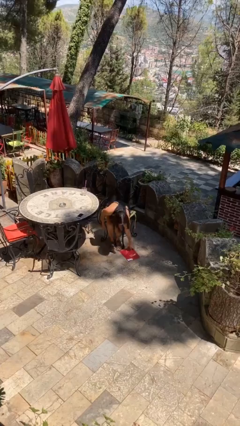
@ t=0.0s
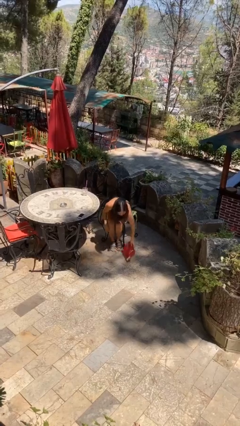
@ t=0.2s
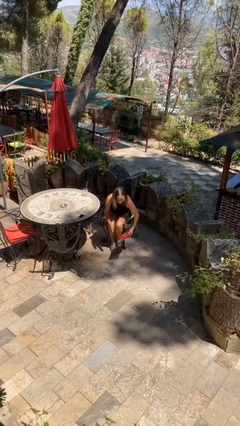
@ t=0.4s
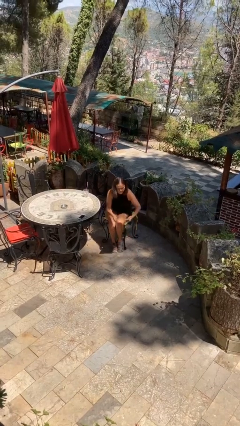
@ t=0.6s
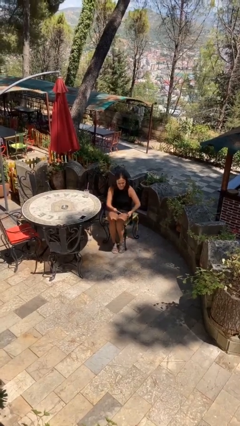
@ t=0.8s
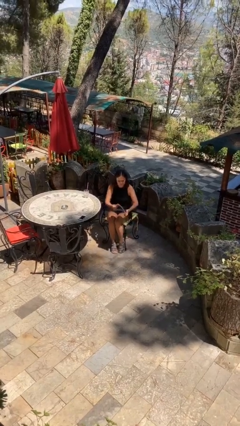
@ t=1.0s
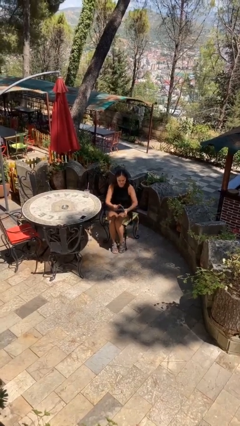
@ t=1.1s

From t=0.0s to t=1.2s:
person picks up object from floor

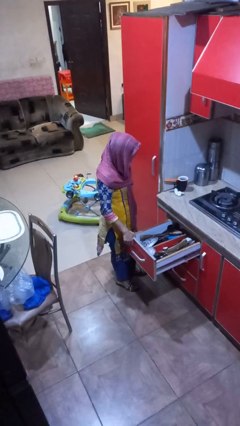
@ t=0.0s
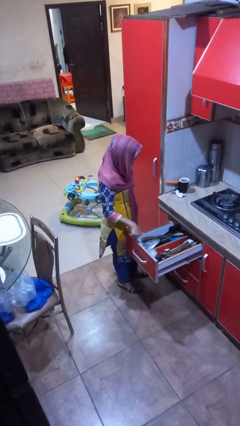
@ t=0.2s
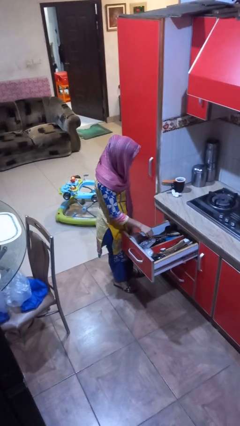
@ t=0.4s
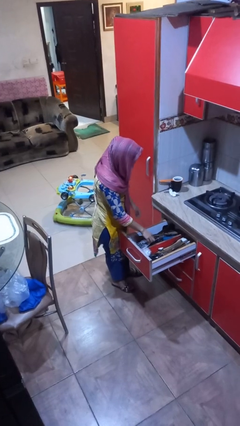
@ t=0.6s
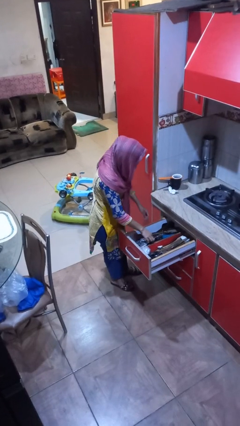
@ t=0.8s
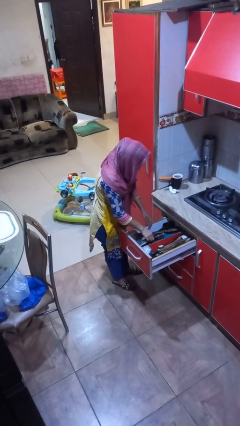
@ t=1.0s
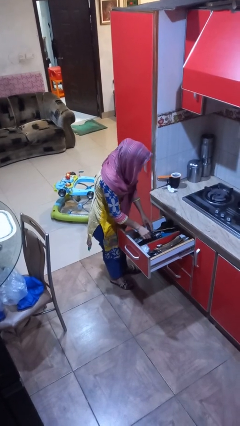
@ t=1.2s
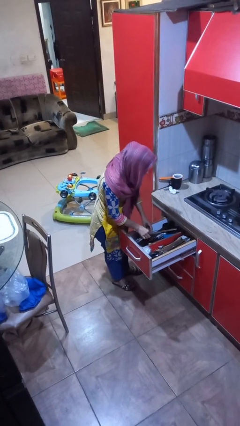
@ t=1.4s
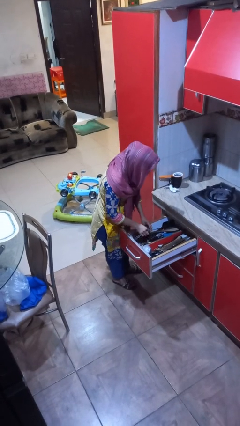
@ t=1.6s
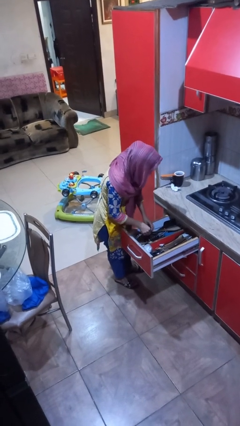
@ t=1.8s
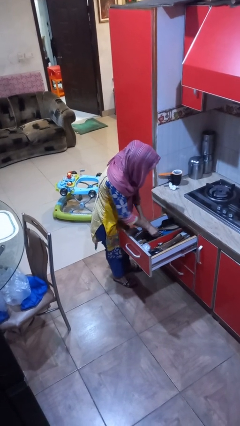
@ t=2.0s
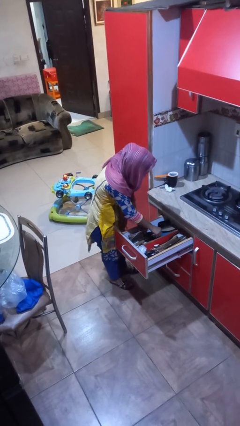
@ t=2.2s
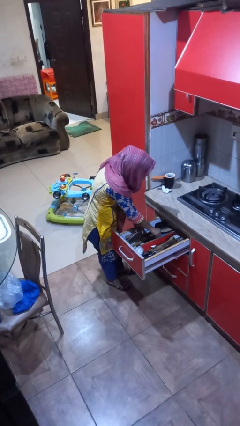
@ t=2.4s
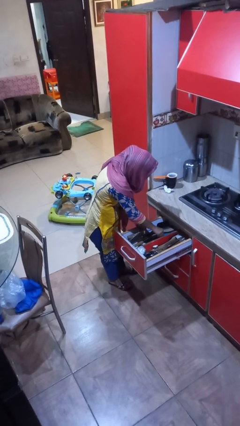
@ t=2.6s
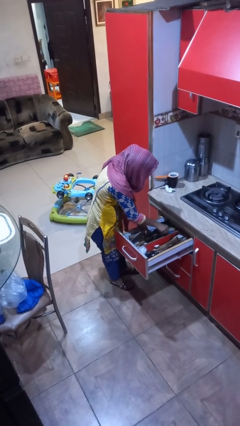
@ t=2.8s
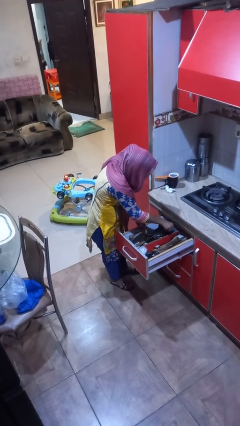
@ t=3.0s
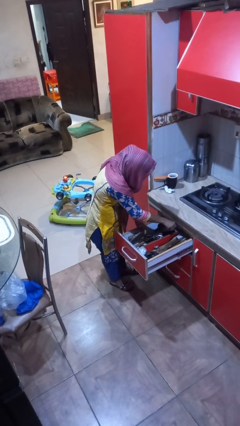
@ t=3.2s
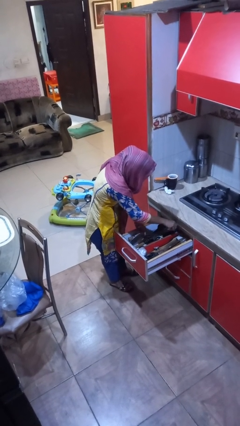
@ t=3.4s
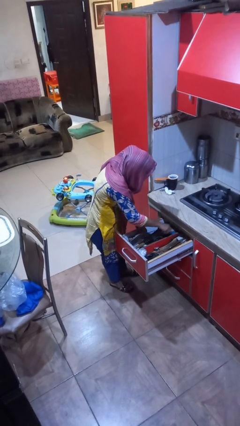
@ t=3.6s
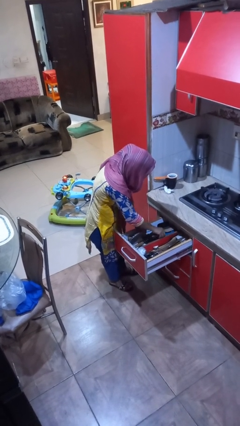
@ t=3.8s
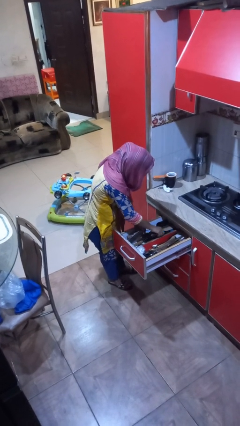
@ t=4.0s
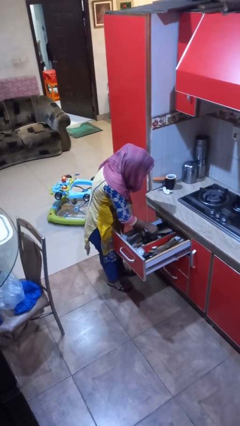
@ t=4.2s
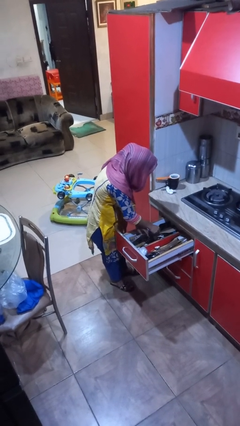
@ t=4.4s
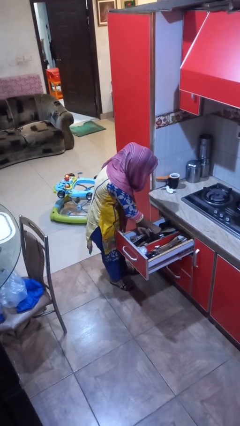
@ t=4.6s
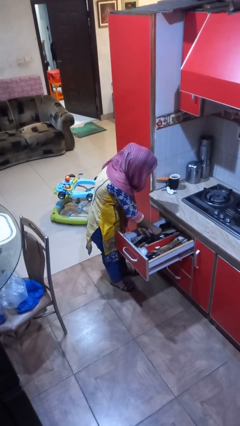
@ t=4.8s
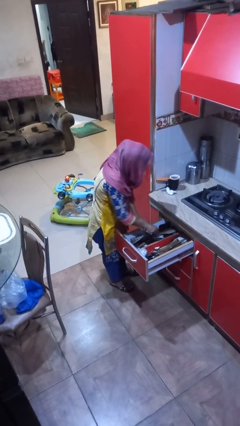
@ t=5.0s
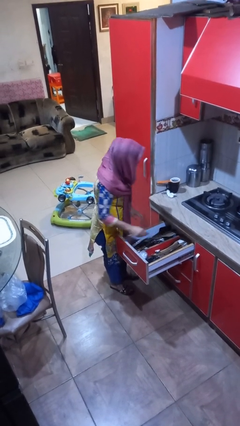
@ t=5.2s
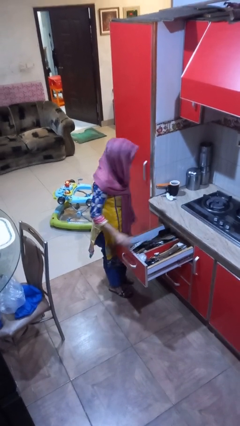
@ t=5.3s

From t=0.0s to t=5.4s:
person searches in kitchen drawer

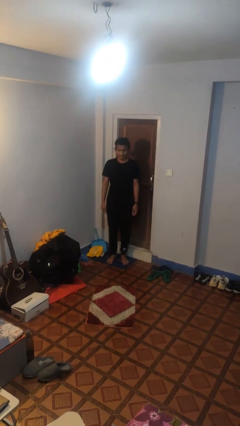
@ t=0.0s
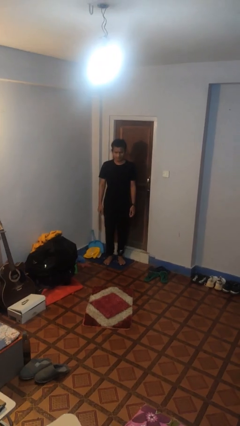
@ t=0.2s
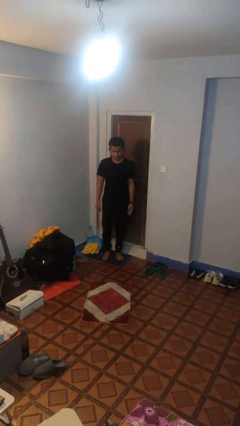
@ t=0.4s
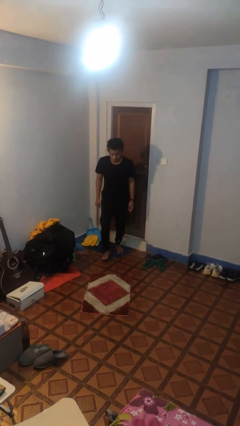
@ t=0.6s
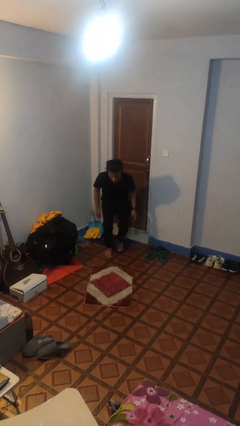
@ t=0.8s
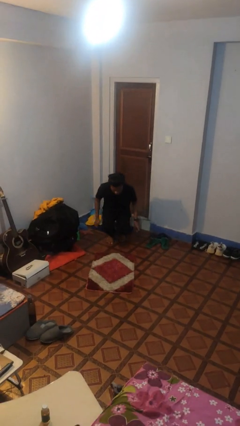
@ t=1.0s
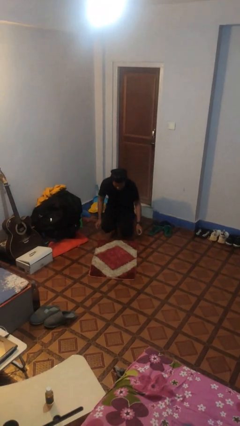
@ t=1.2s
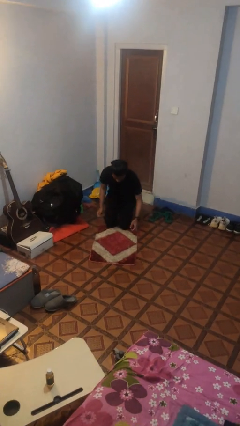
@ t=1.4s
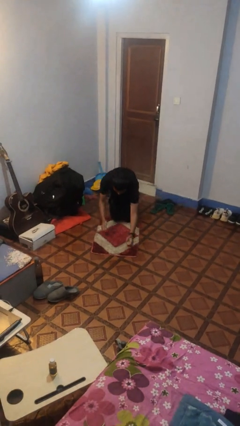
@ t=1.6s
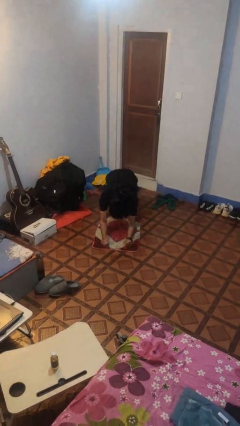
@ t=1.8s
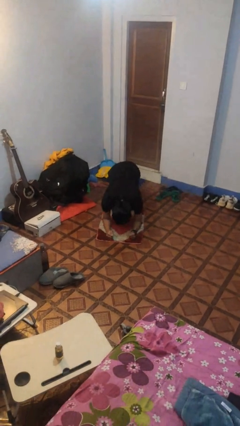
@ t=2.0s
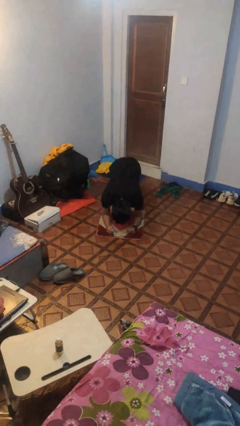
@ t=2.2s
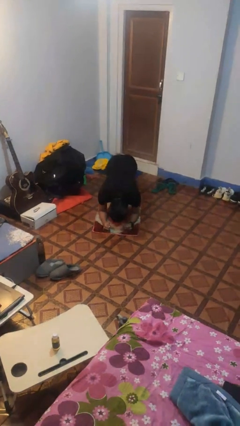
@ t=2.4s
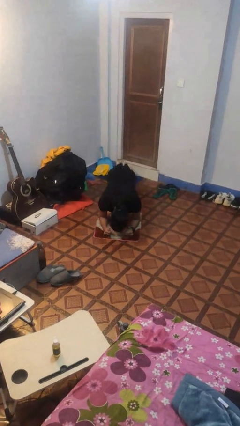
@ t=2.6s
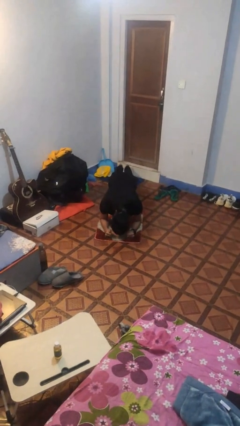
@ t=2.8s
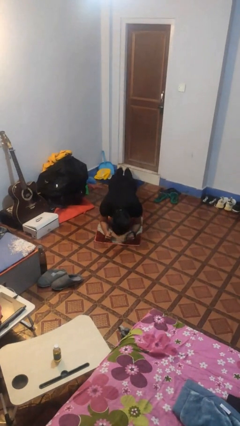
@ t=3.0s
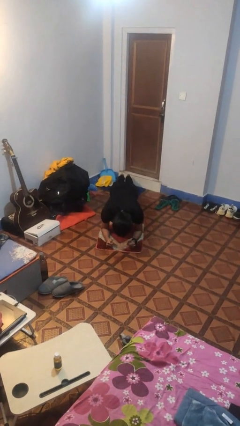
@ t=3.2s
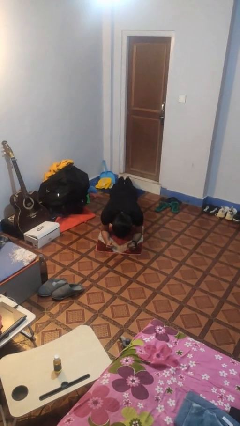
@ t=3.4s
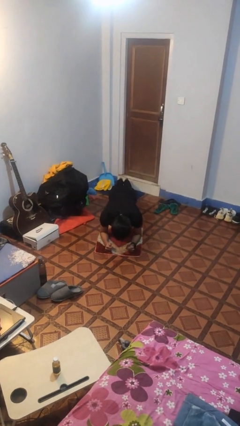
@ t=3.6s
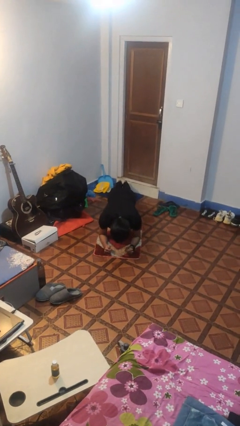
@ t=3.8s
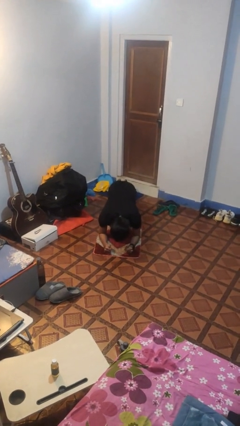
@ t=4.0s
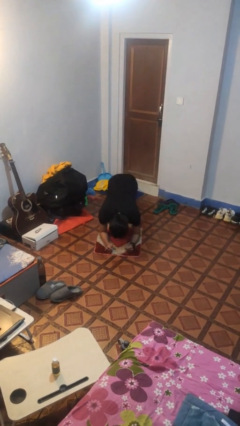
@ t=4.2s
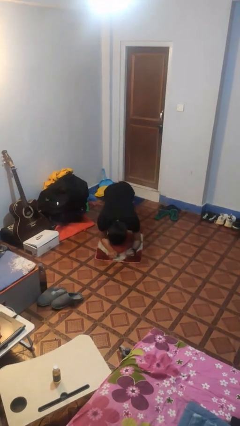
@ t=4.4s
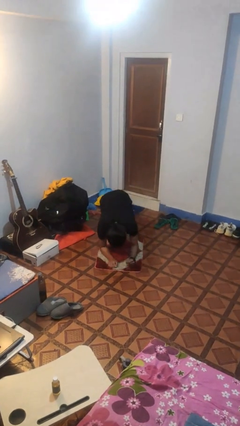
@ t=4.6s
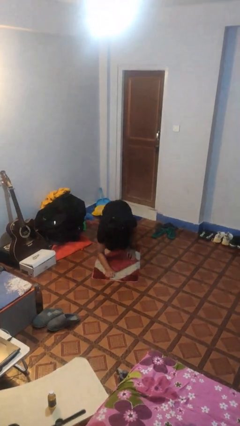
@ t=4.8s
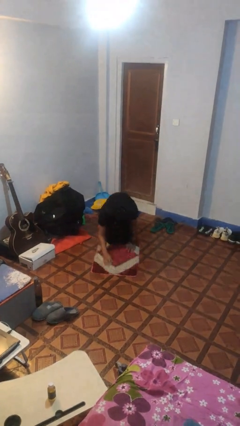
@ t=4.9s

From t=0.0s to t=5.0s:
person exercises with plank

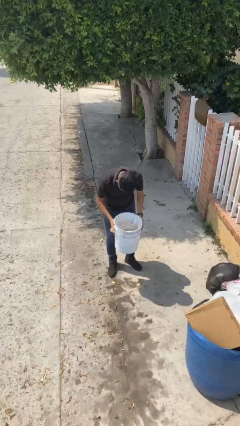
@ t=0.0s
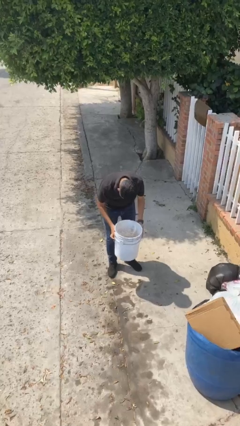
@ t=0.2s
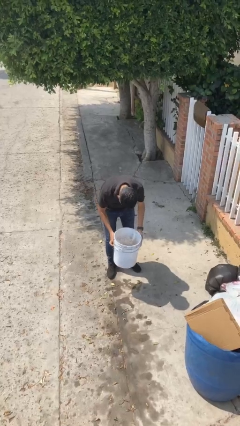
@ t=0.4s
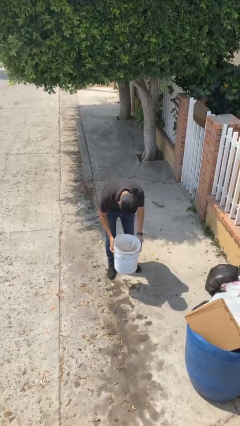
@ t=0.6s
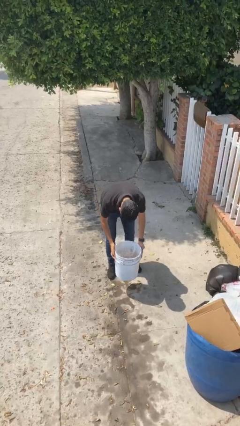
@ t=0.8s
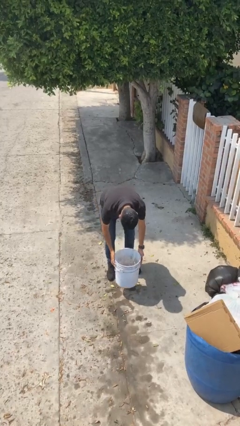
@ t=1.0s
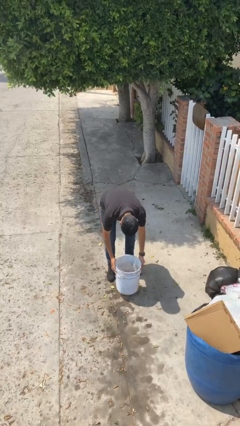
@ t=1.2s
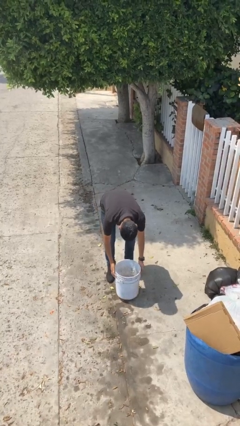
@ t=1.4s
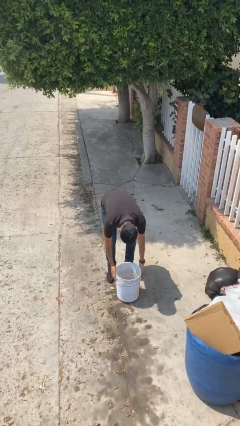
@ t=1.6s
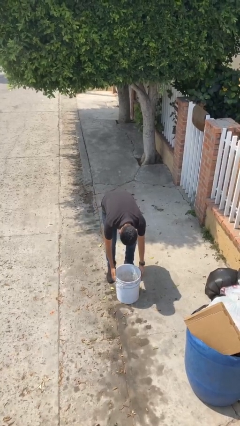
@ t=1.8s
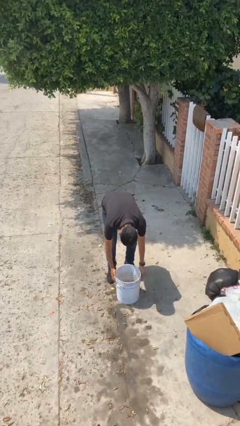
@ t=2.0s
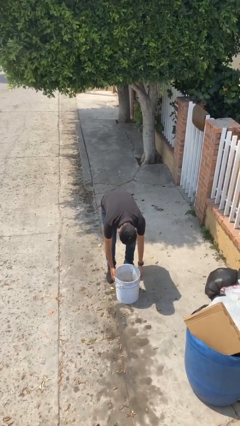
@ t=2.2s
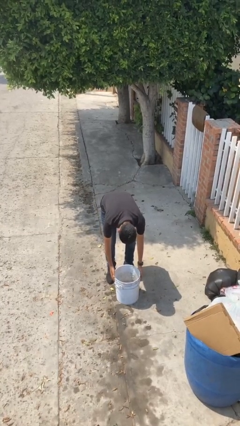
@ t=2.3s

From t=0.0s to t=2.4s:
person puts down object on floor

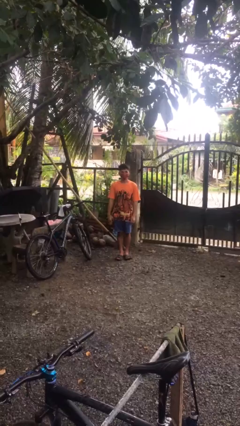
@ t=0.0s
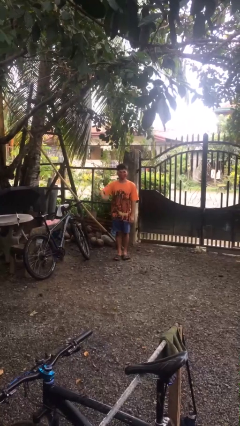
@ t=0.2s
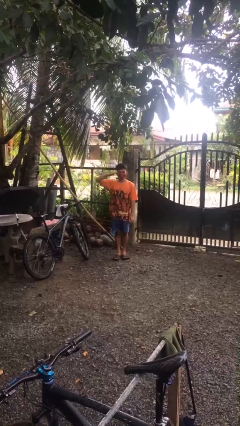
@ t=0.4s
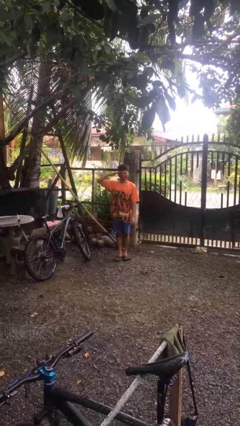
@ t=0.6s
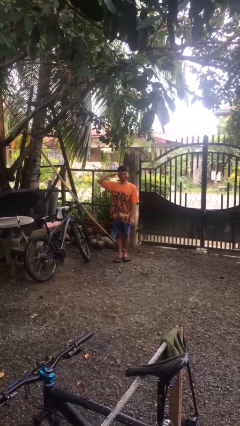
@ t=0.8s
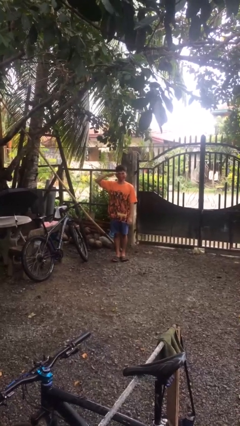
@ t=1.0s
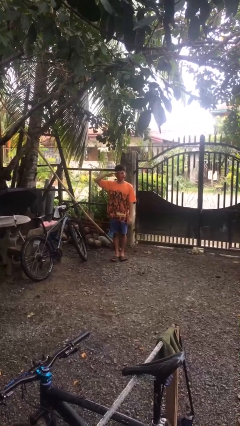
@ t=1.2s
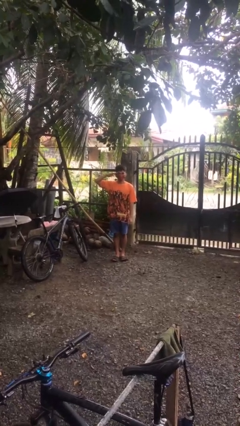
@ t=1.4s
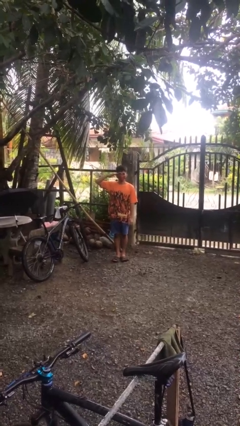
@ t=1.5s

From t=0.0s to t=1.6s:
person salutes

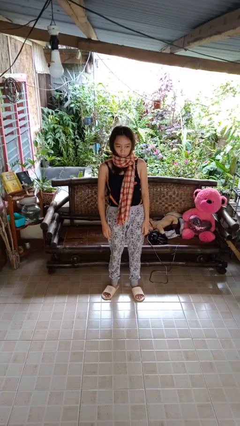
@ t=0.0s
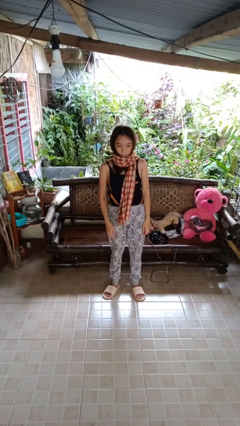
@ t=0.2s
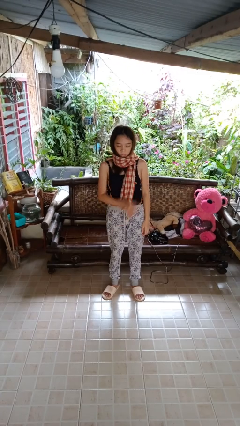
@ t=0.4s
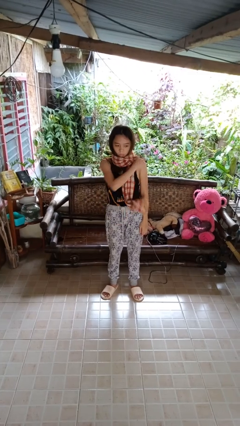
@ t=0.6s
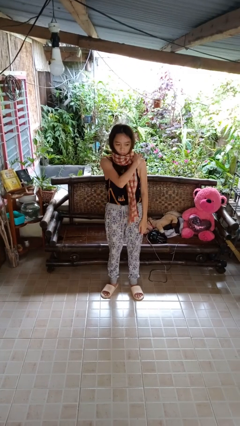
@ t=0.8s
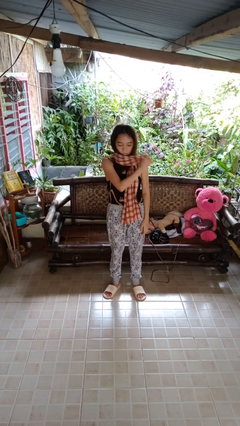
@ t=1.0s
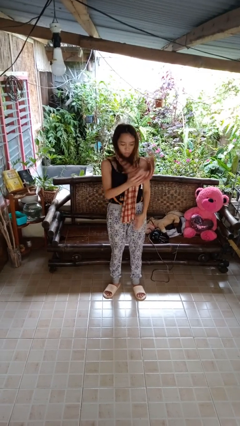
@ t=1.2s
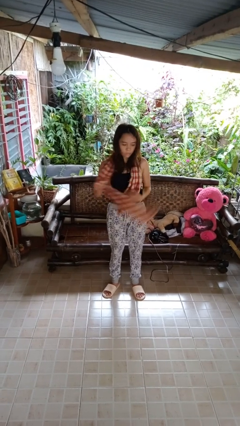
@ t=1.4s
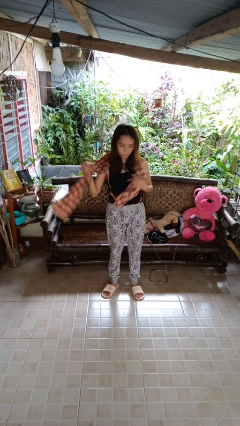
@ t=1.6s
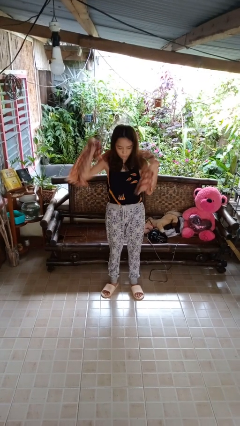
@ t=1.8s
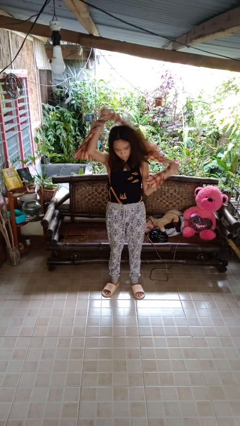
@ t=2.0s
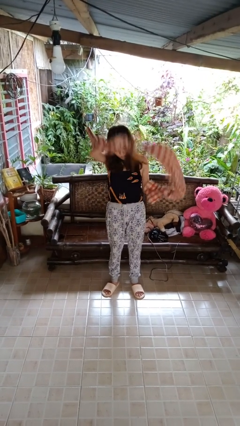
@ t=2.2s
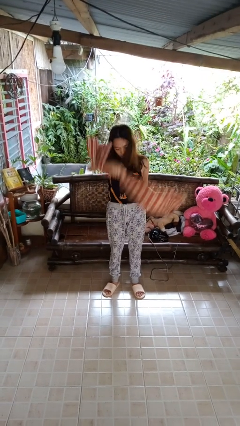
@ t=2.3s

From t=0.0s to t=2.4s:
person takes off scarf
